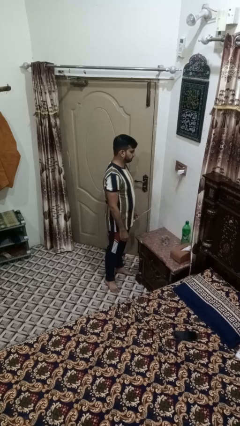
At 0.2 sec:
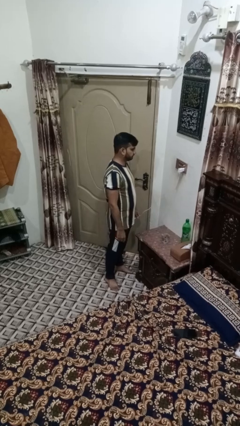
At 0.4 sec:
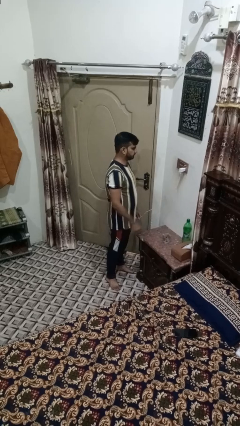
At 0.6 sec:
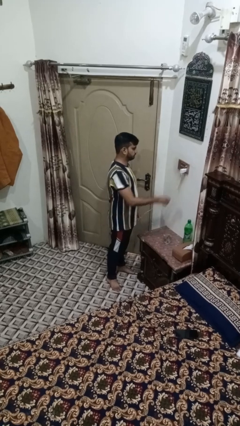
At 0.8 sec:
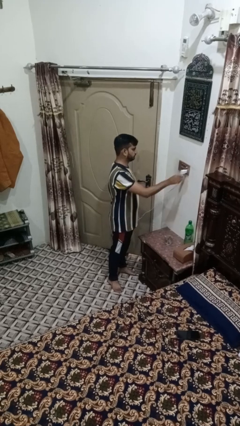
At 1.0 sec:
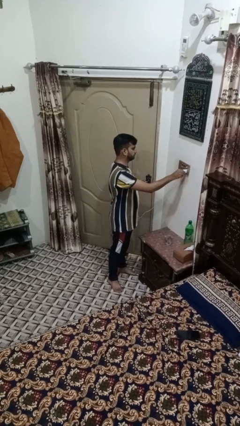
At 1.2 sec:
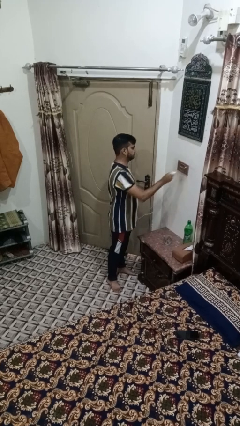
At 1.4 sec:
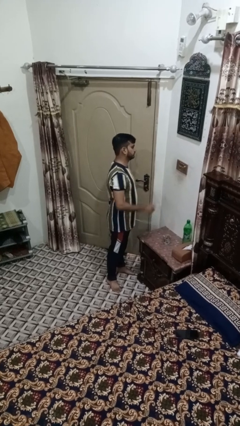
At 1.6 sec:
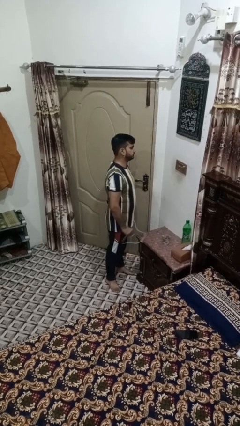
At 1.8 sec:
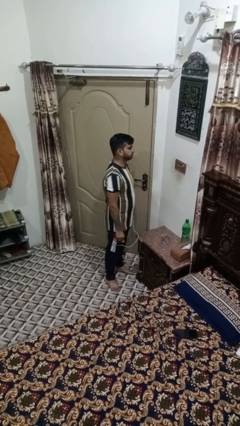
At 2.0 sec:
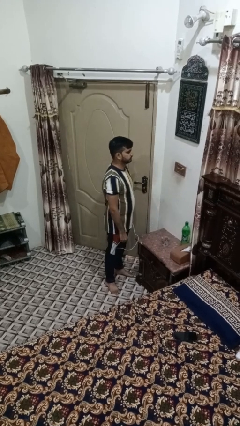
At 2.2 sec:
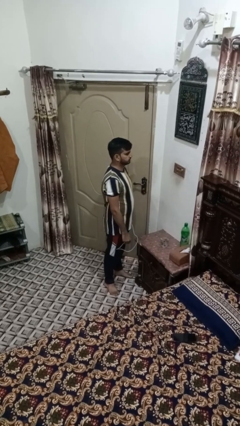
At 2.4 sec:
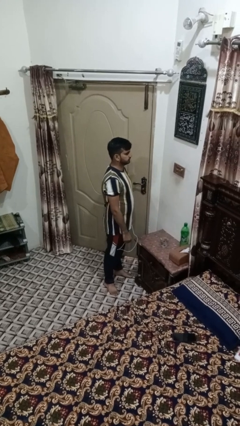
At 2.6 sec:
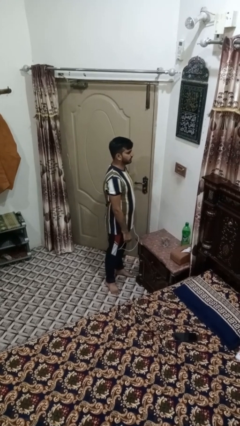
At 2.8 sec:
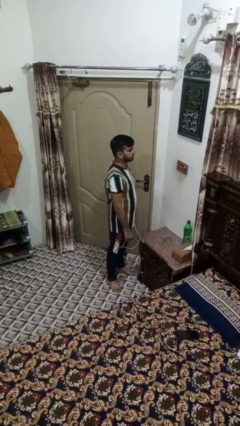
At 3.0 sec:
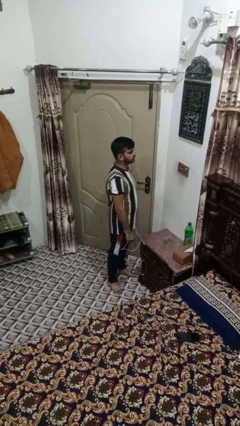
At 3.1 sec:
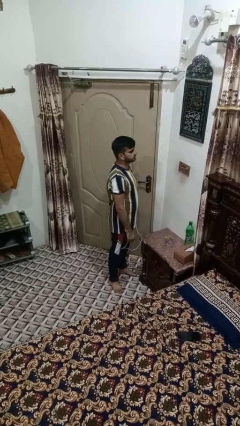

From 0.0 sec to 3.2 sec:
person unplugs from electrical socket

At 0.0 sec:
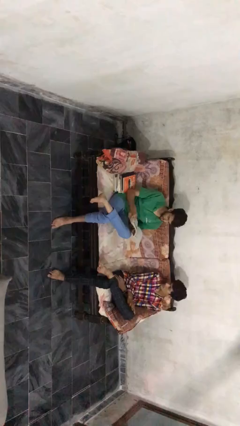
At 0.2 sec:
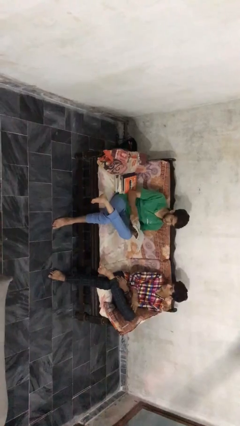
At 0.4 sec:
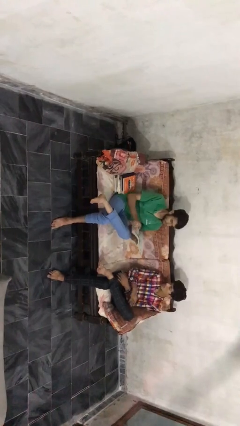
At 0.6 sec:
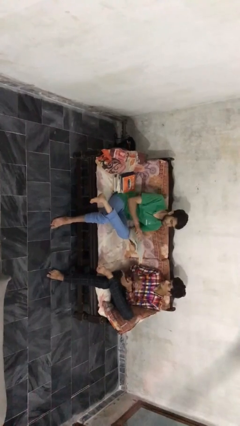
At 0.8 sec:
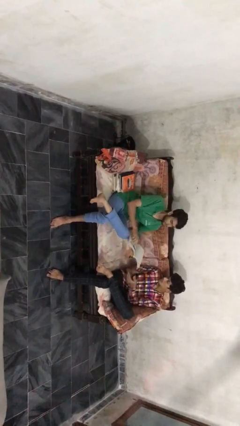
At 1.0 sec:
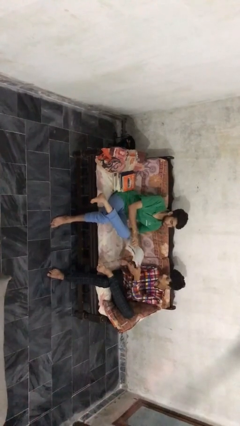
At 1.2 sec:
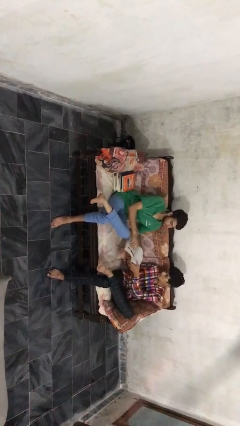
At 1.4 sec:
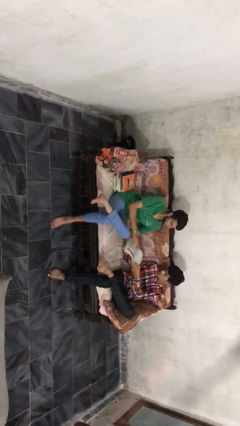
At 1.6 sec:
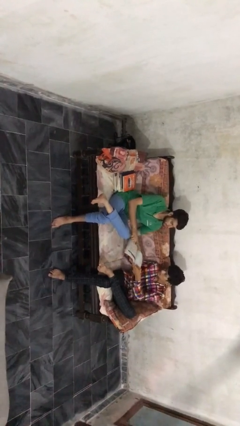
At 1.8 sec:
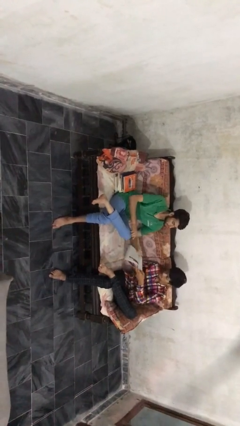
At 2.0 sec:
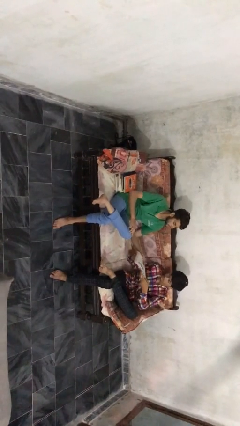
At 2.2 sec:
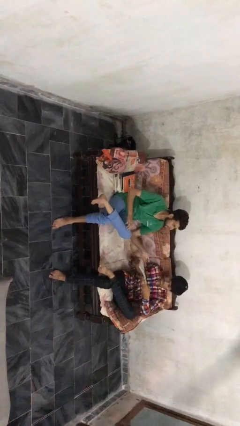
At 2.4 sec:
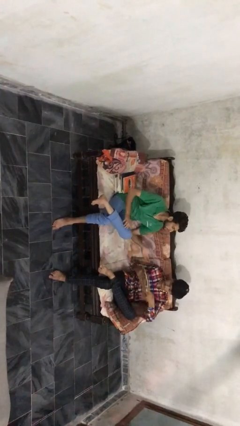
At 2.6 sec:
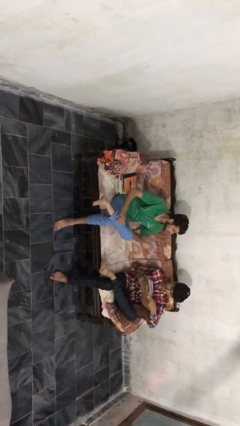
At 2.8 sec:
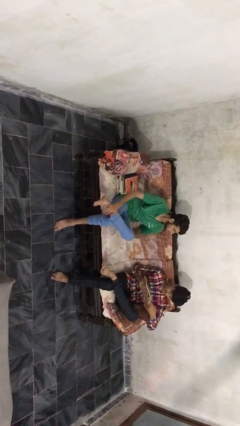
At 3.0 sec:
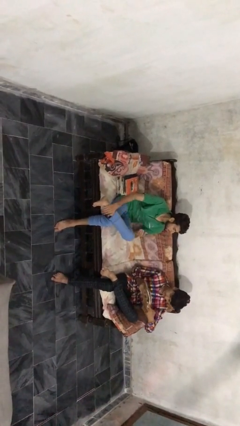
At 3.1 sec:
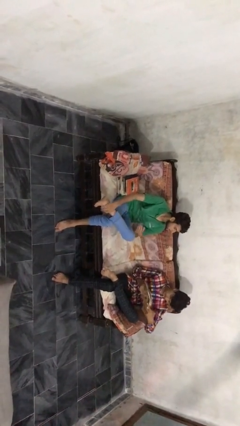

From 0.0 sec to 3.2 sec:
person transfers object to person

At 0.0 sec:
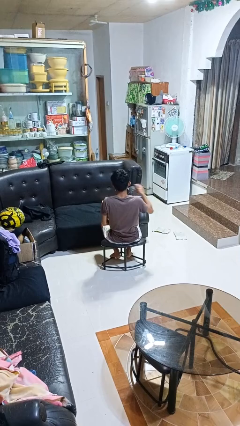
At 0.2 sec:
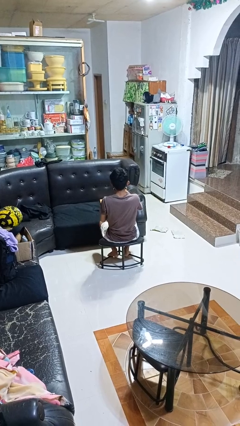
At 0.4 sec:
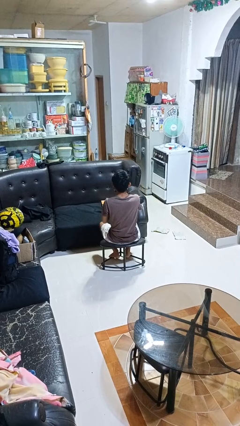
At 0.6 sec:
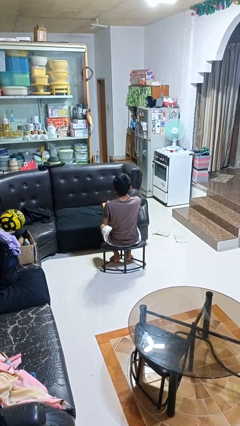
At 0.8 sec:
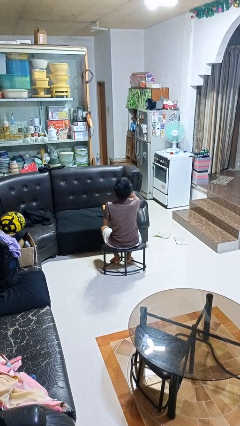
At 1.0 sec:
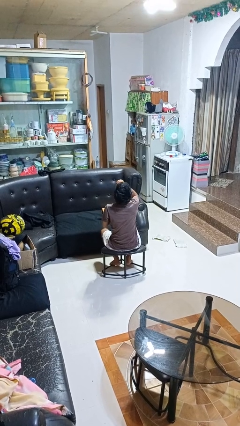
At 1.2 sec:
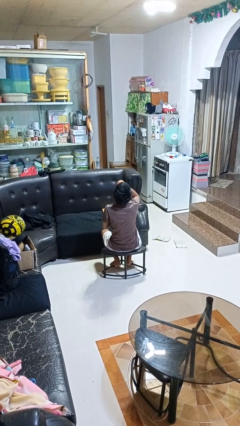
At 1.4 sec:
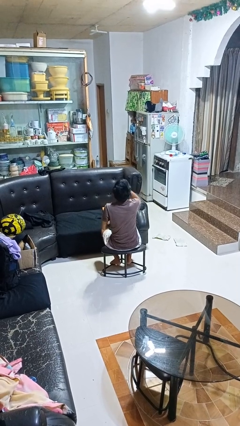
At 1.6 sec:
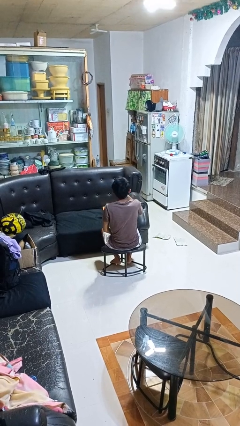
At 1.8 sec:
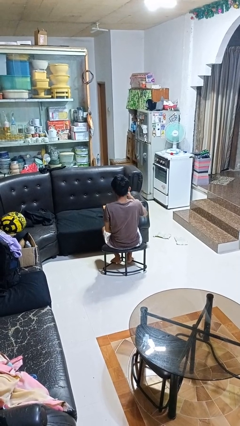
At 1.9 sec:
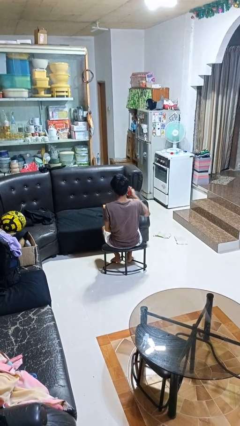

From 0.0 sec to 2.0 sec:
person drinks from beverage can

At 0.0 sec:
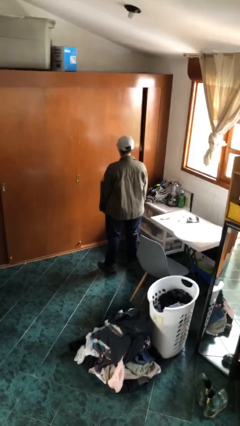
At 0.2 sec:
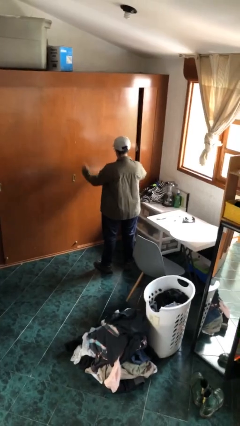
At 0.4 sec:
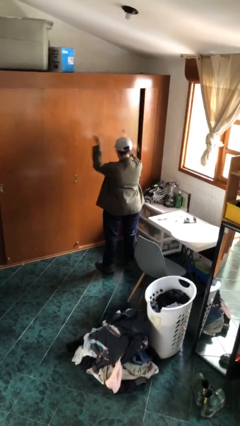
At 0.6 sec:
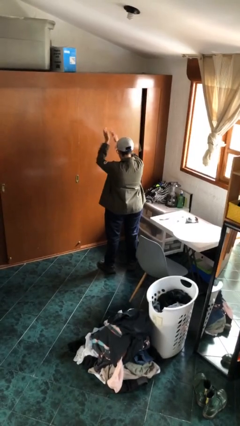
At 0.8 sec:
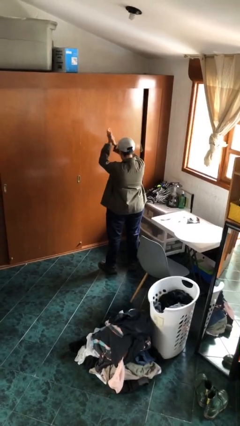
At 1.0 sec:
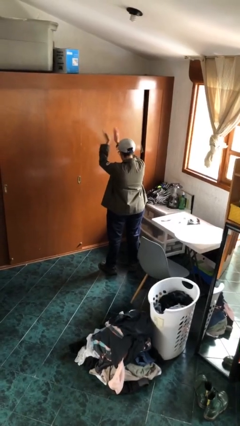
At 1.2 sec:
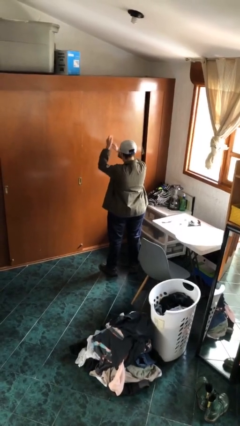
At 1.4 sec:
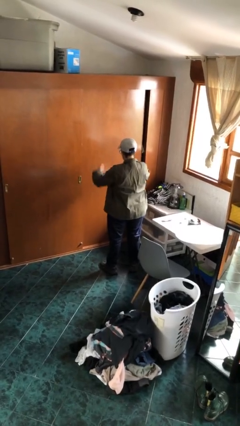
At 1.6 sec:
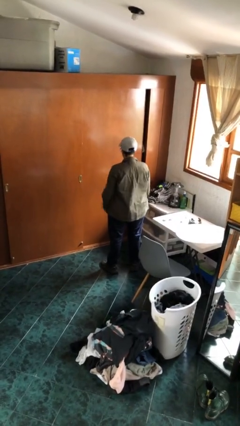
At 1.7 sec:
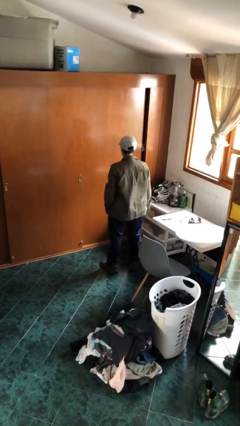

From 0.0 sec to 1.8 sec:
person claps hands

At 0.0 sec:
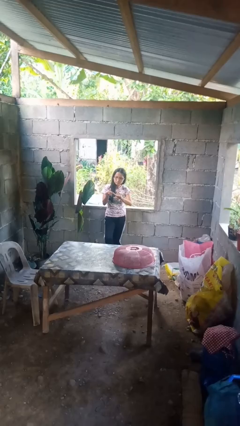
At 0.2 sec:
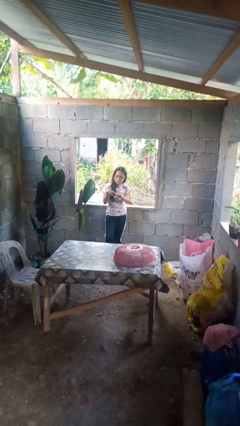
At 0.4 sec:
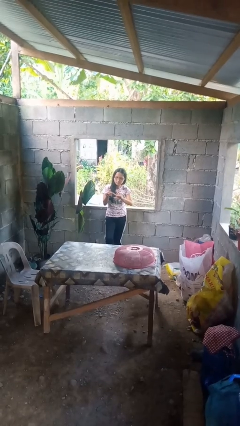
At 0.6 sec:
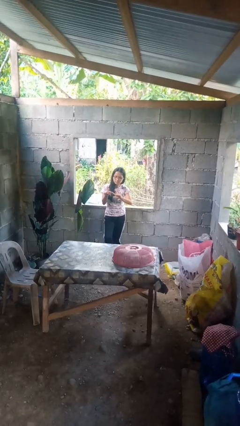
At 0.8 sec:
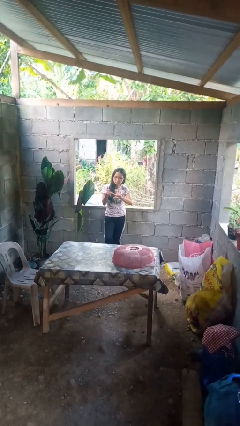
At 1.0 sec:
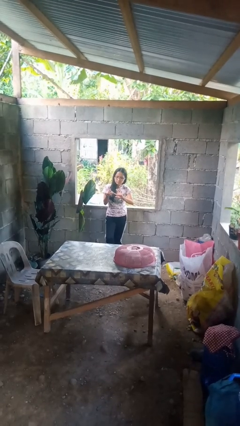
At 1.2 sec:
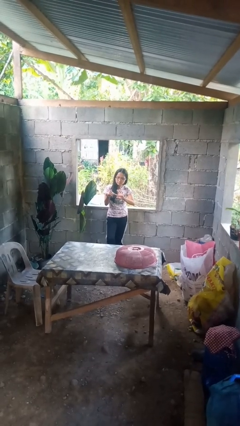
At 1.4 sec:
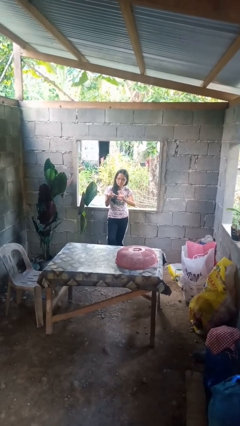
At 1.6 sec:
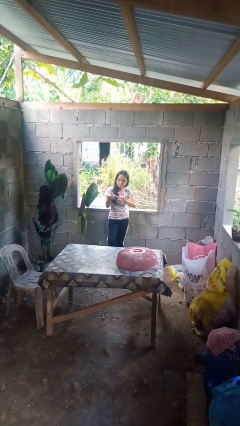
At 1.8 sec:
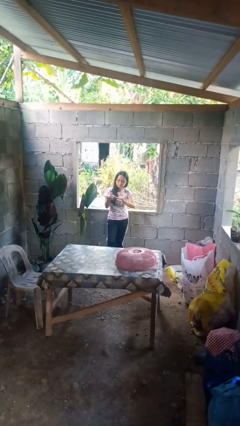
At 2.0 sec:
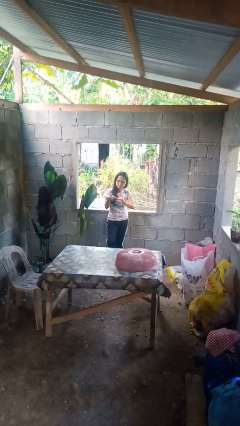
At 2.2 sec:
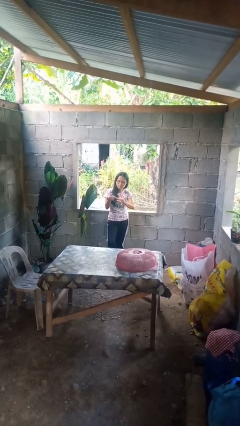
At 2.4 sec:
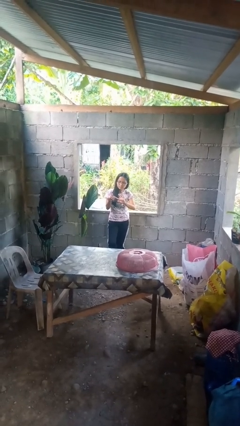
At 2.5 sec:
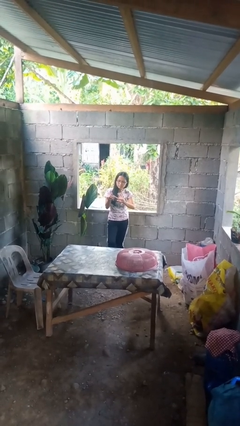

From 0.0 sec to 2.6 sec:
person clips fingernails

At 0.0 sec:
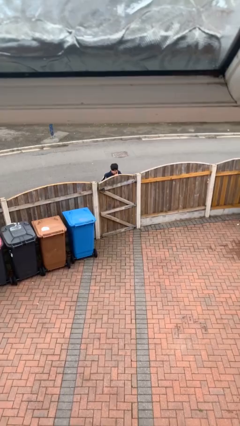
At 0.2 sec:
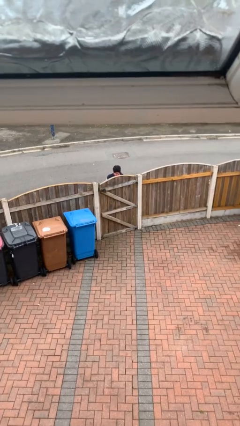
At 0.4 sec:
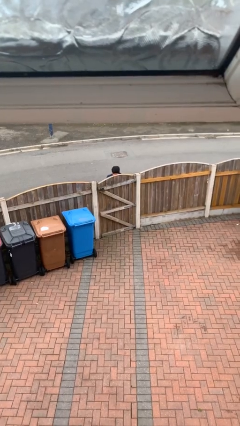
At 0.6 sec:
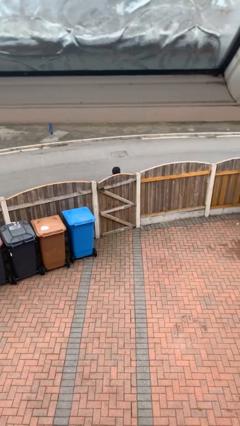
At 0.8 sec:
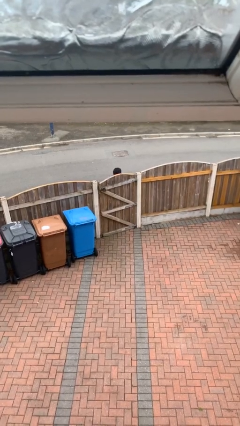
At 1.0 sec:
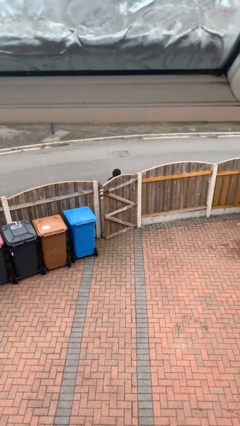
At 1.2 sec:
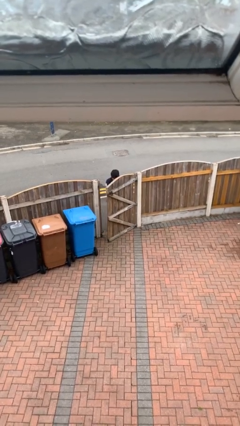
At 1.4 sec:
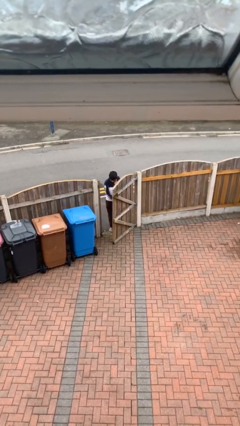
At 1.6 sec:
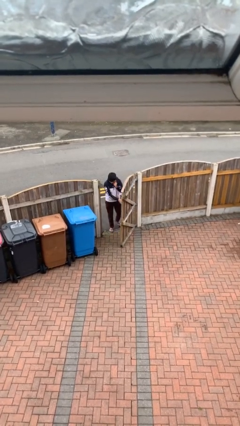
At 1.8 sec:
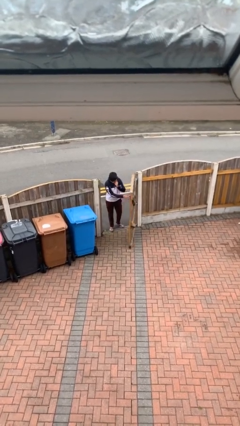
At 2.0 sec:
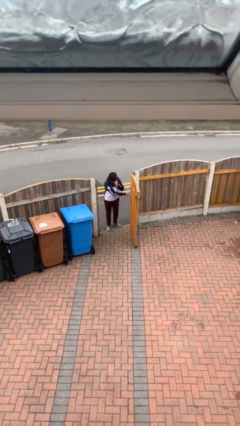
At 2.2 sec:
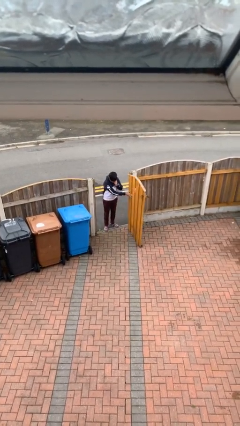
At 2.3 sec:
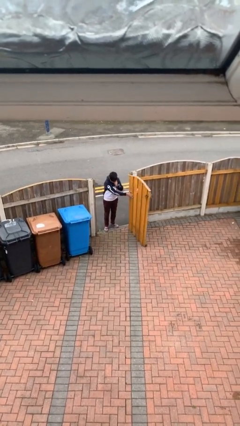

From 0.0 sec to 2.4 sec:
person opens facility door

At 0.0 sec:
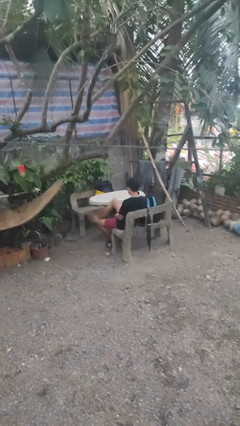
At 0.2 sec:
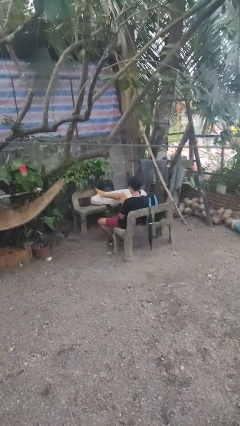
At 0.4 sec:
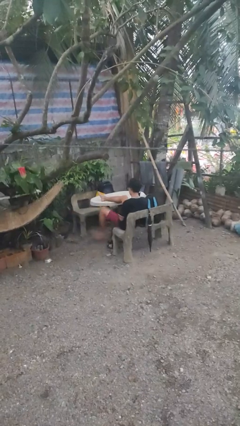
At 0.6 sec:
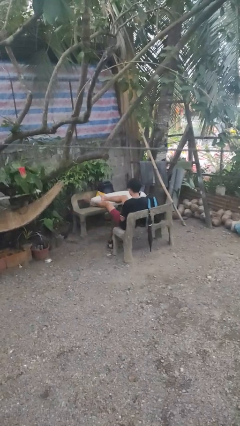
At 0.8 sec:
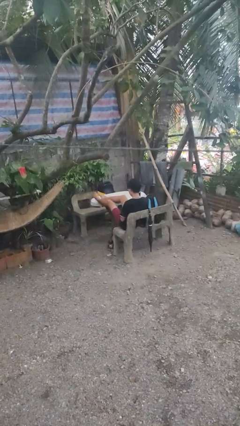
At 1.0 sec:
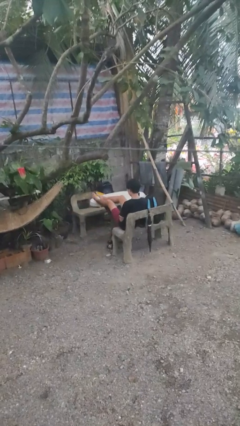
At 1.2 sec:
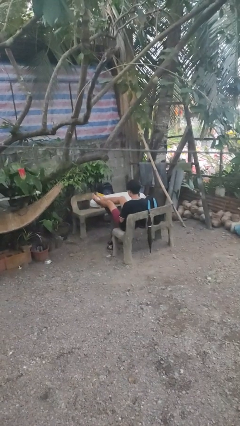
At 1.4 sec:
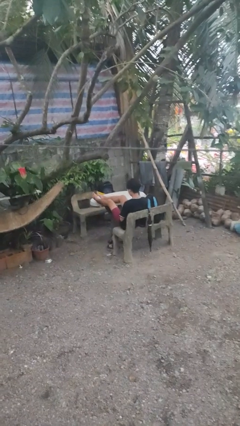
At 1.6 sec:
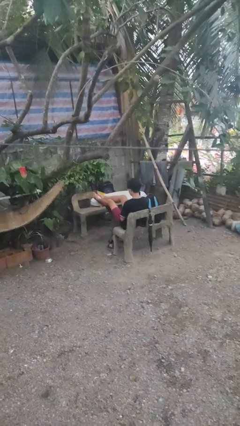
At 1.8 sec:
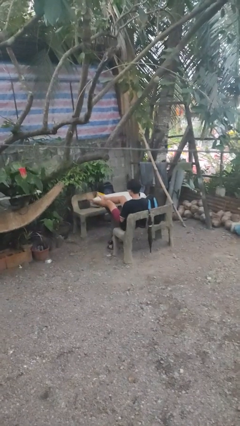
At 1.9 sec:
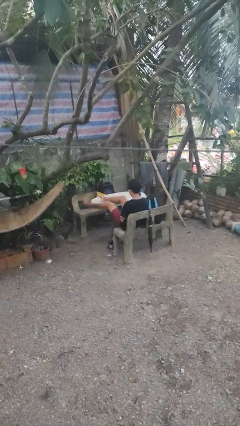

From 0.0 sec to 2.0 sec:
person puts feet up
